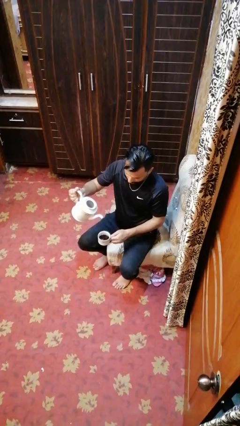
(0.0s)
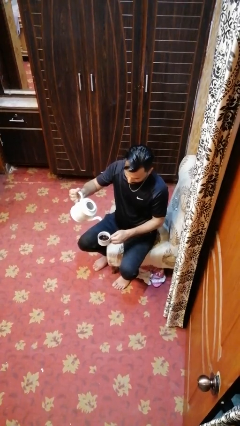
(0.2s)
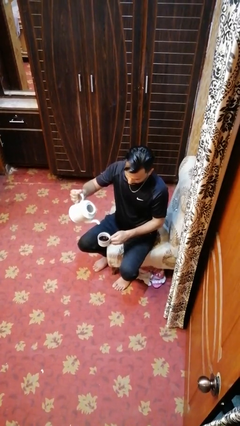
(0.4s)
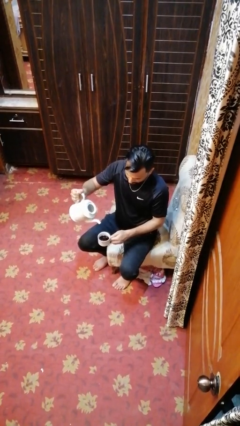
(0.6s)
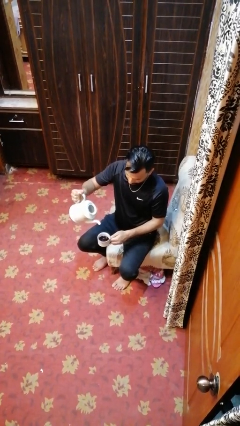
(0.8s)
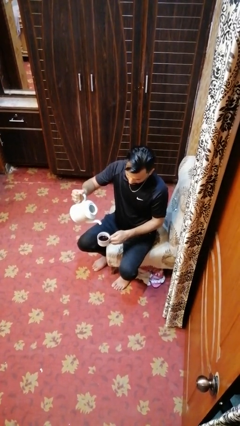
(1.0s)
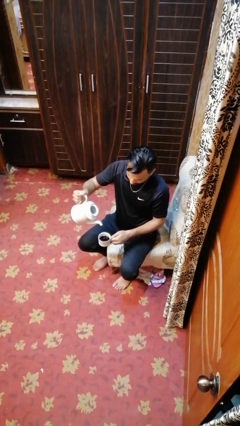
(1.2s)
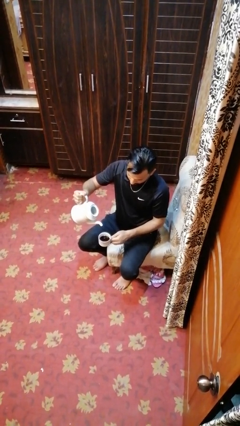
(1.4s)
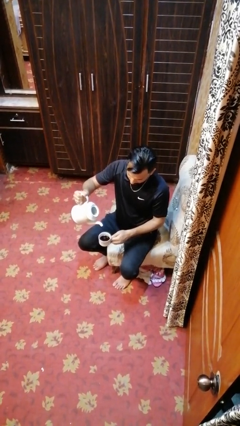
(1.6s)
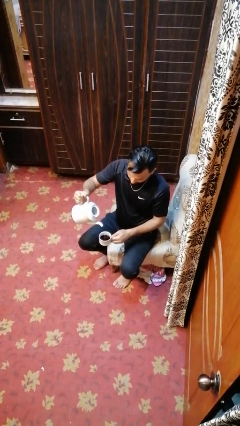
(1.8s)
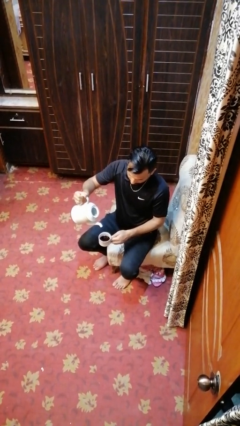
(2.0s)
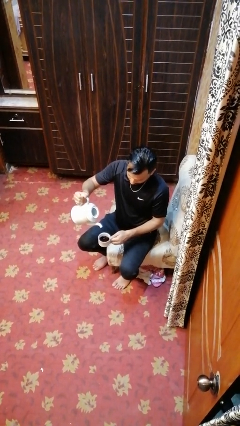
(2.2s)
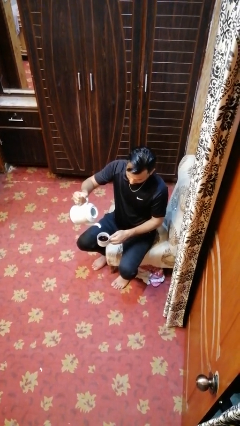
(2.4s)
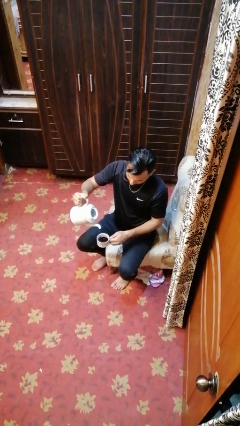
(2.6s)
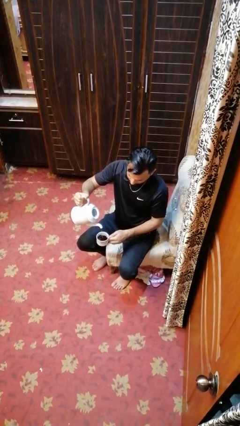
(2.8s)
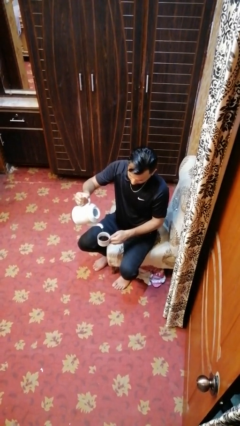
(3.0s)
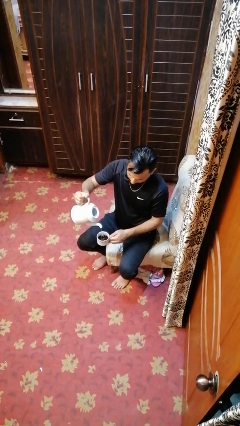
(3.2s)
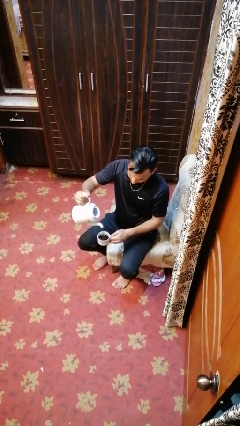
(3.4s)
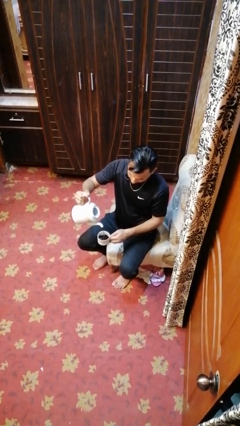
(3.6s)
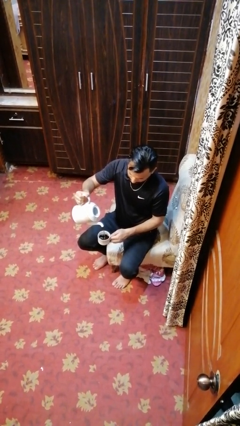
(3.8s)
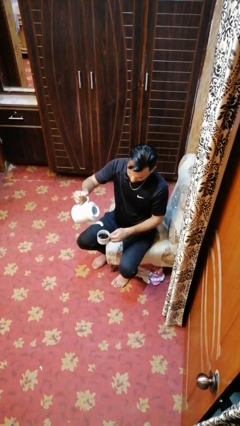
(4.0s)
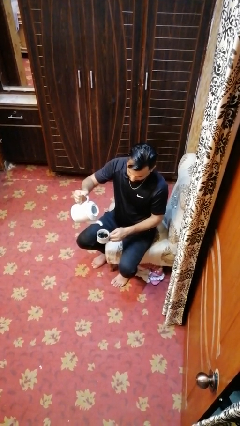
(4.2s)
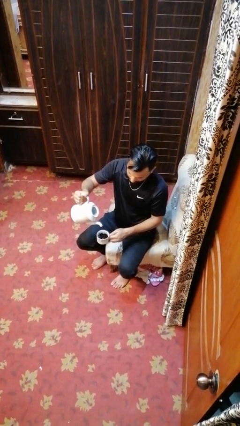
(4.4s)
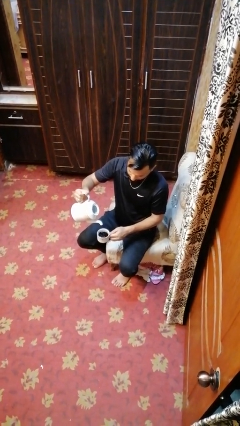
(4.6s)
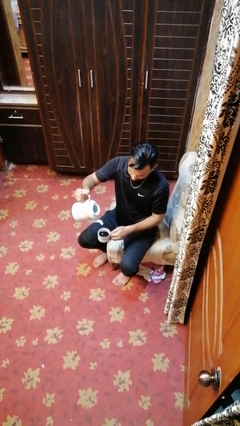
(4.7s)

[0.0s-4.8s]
person pours coffee into mug

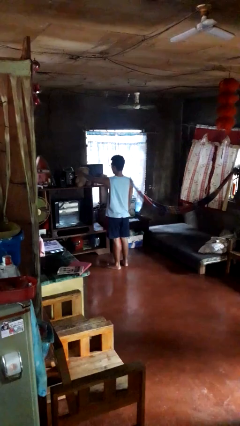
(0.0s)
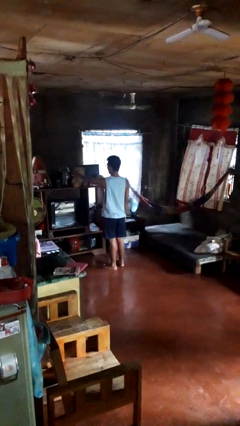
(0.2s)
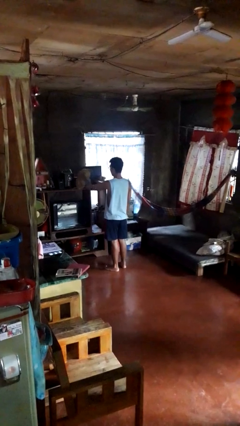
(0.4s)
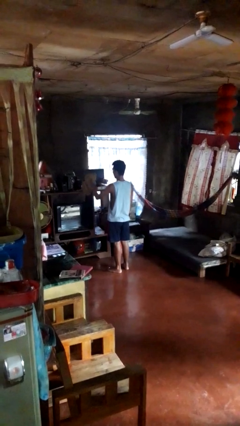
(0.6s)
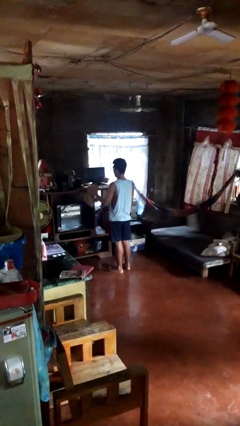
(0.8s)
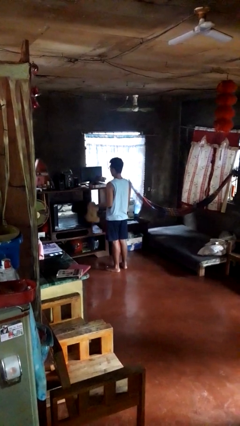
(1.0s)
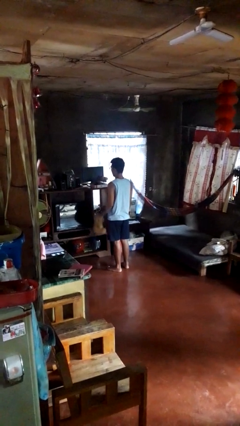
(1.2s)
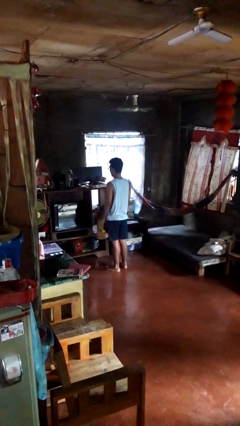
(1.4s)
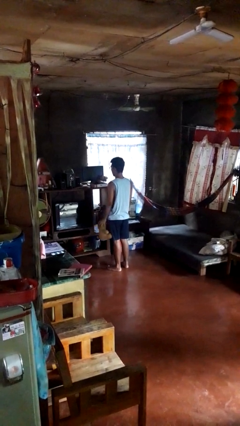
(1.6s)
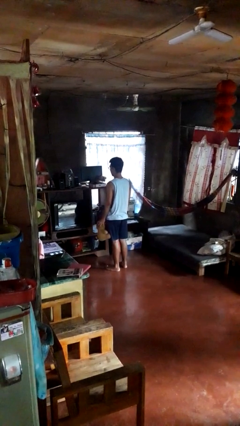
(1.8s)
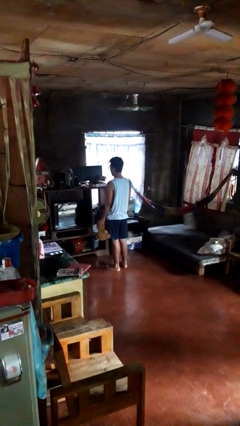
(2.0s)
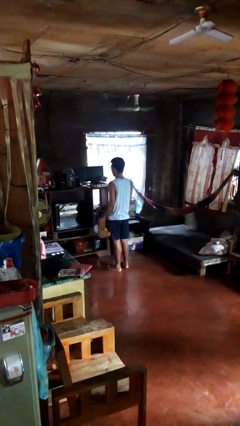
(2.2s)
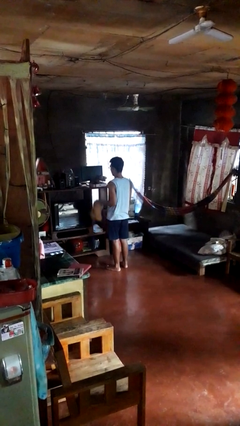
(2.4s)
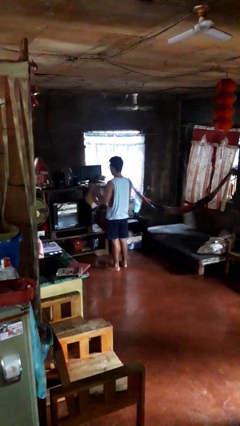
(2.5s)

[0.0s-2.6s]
person picks up object from shelf

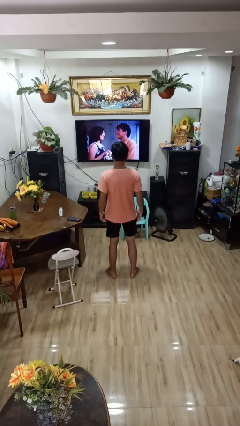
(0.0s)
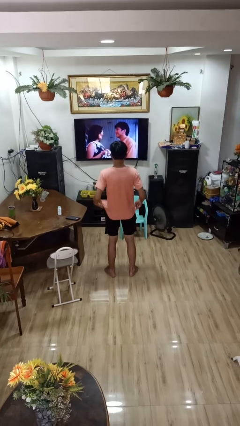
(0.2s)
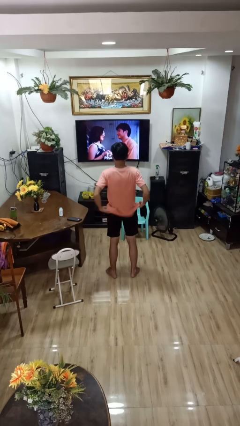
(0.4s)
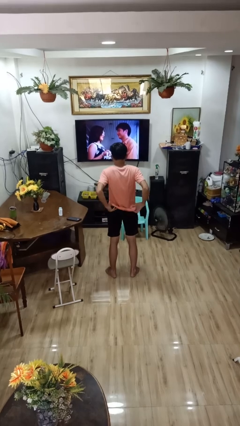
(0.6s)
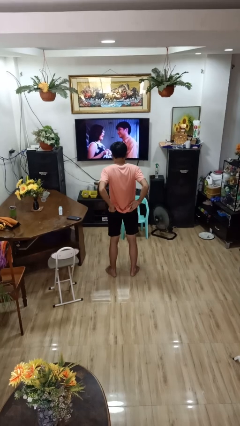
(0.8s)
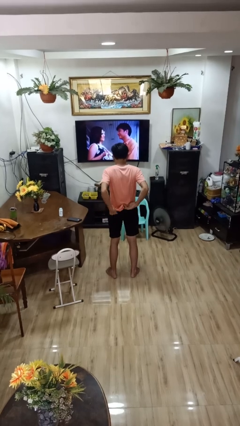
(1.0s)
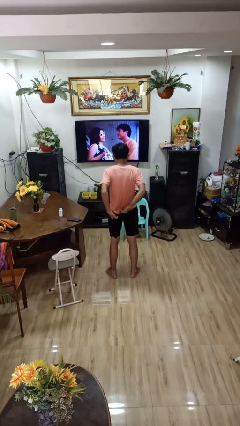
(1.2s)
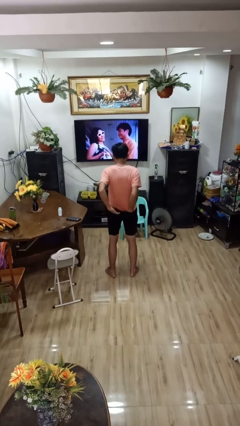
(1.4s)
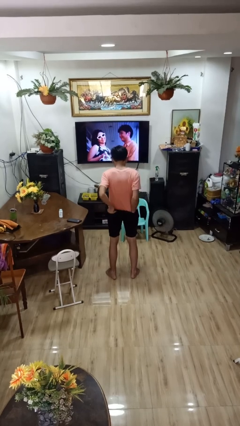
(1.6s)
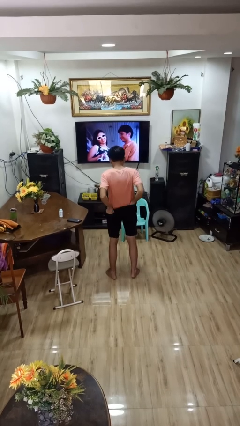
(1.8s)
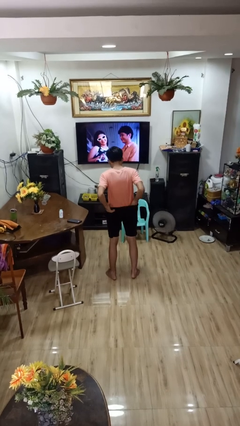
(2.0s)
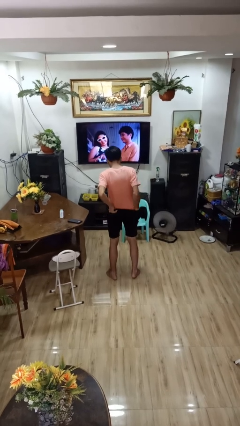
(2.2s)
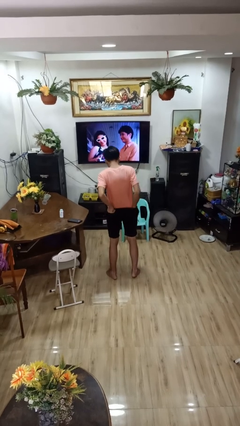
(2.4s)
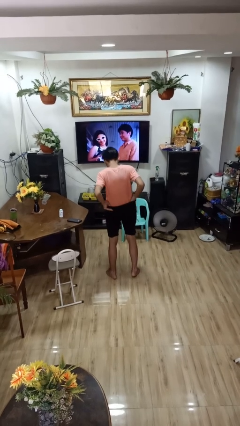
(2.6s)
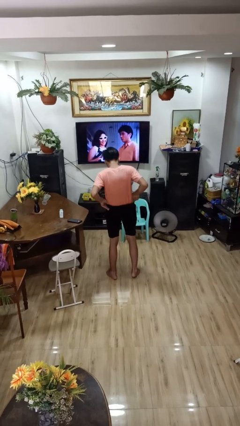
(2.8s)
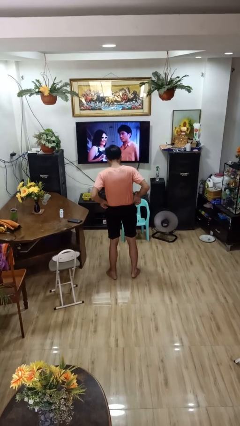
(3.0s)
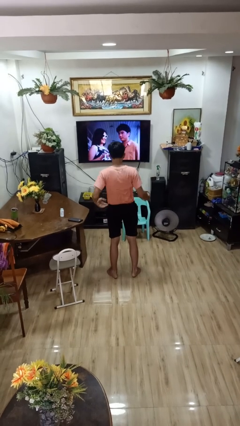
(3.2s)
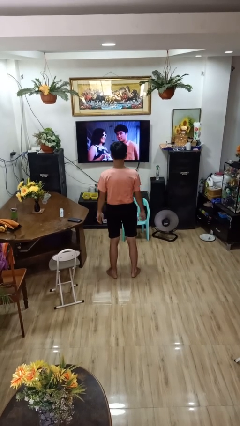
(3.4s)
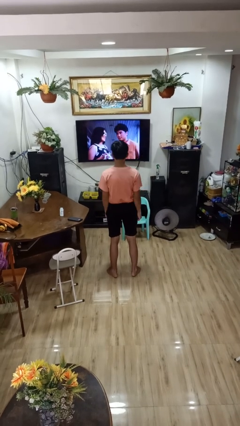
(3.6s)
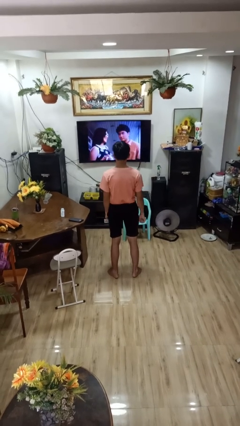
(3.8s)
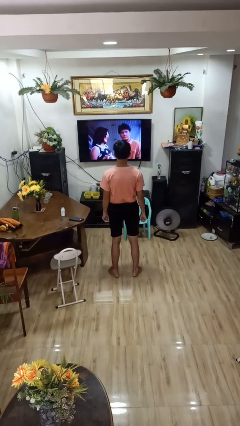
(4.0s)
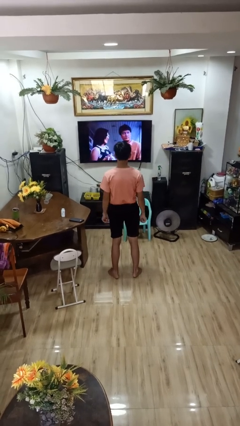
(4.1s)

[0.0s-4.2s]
person tucks in shirt

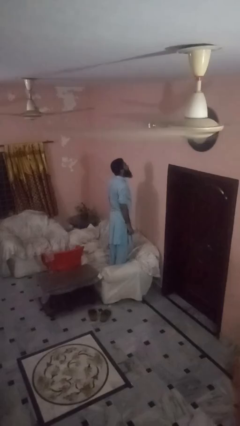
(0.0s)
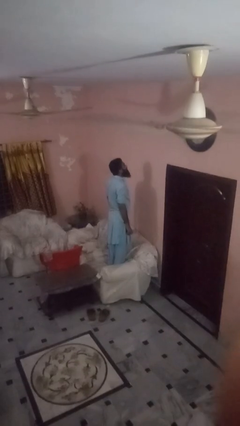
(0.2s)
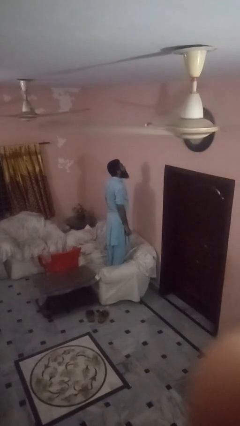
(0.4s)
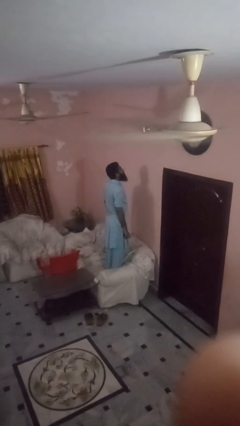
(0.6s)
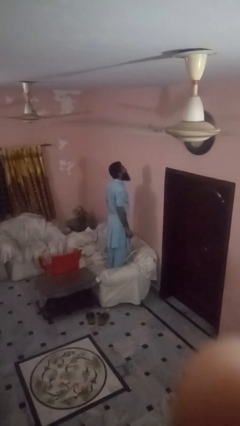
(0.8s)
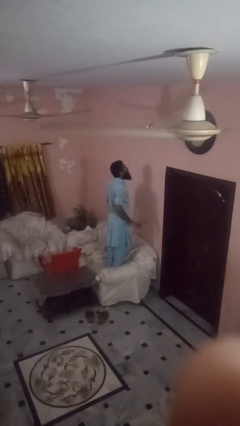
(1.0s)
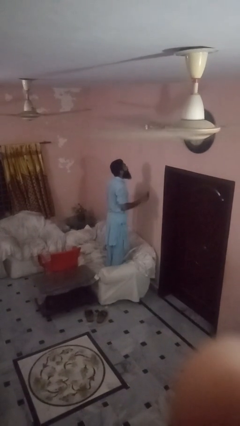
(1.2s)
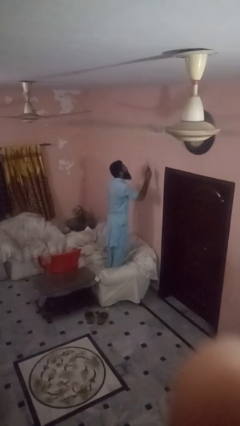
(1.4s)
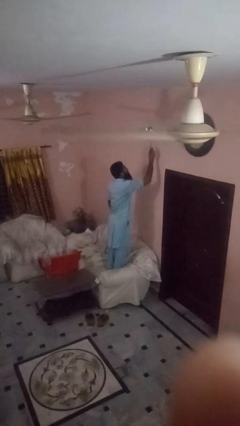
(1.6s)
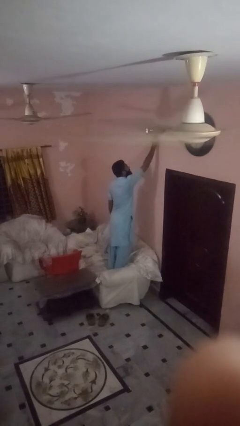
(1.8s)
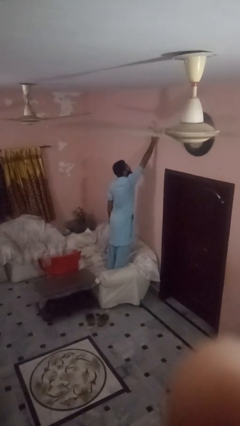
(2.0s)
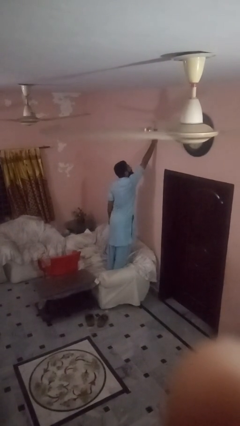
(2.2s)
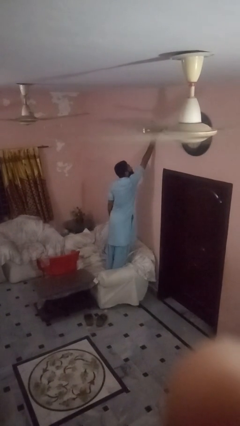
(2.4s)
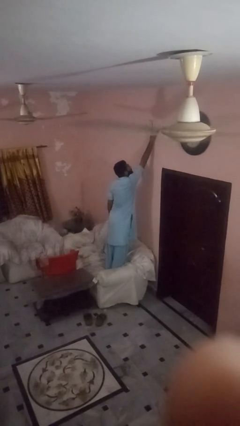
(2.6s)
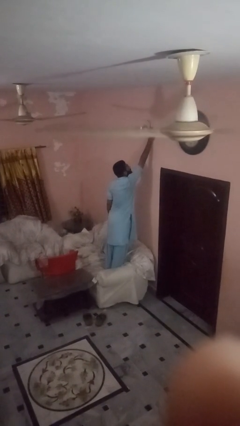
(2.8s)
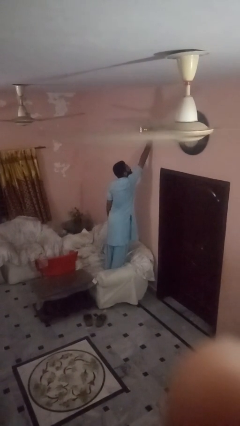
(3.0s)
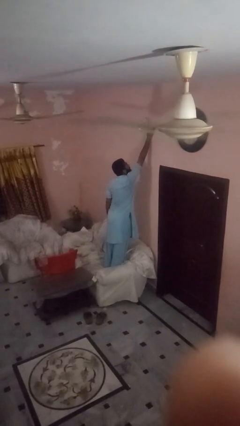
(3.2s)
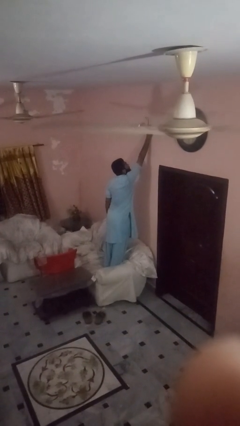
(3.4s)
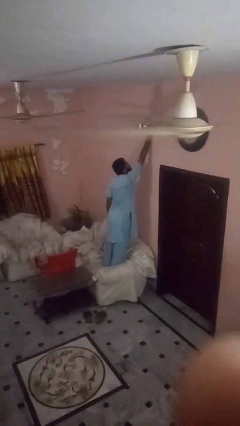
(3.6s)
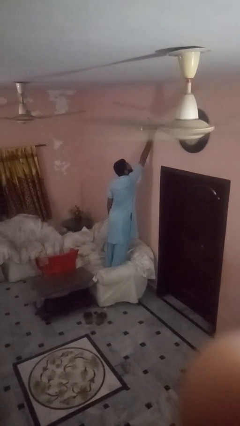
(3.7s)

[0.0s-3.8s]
person puts up smoke detector

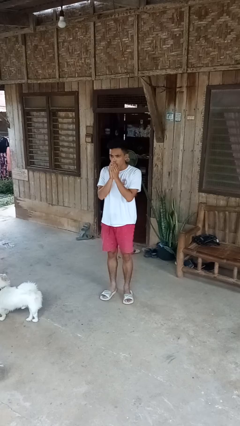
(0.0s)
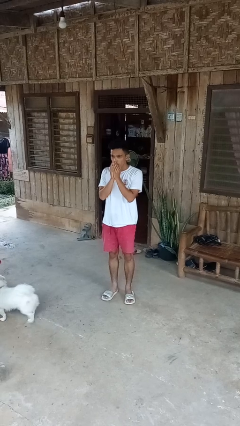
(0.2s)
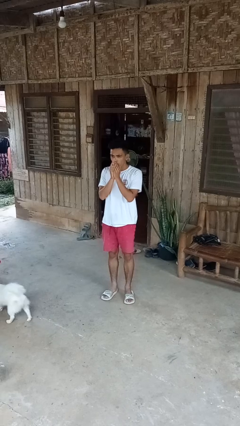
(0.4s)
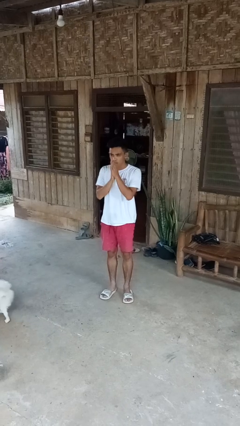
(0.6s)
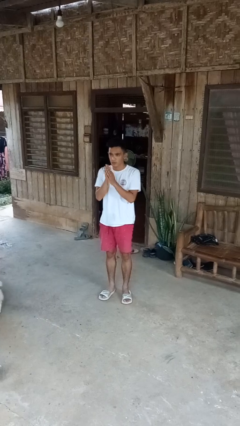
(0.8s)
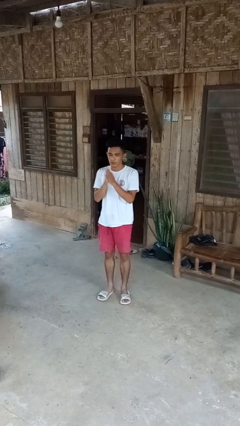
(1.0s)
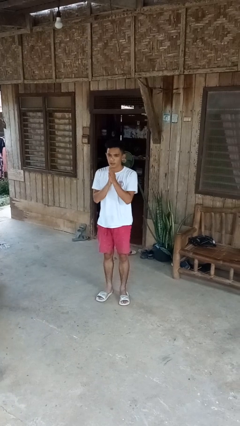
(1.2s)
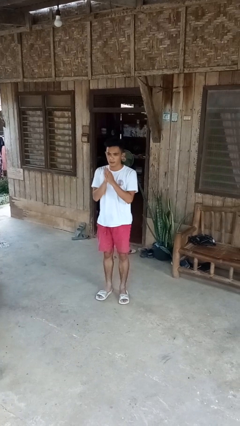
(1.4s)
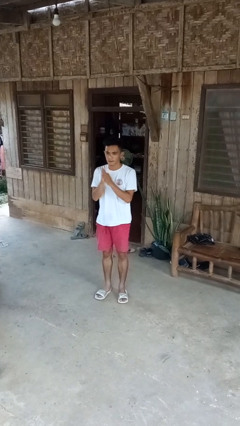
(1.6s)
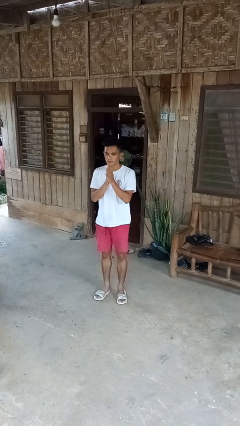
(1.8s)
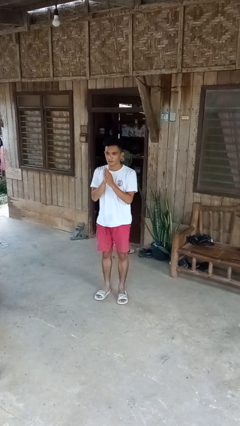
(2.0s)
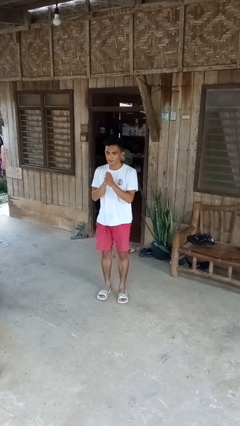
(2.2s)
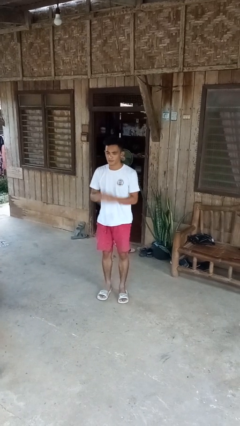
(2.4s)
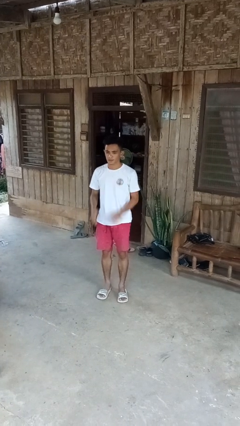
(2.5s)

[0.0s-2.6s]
person blows into hands
